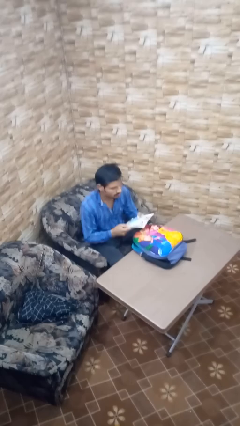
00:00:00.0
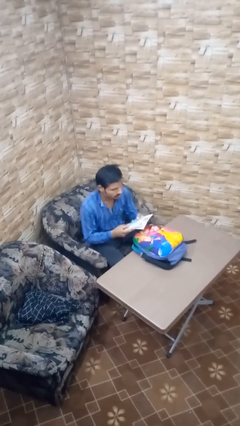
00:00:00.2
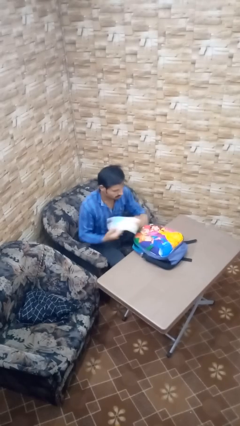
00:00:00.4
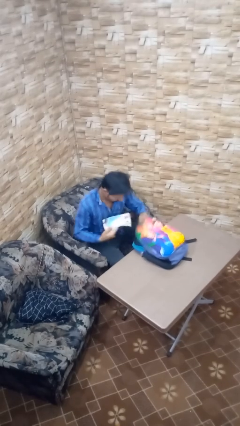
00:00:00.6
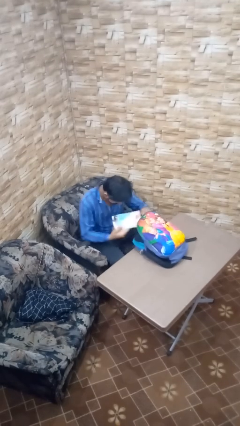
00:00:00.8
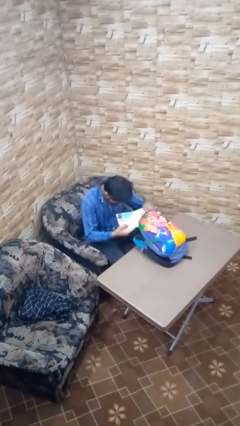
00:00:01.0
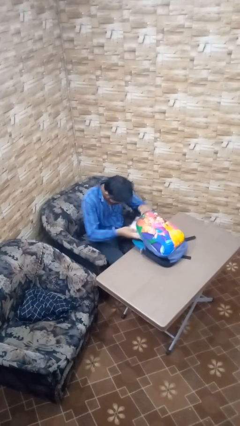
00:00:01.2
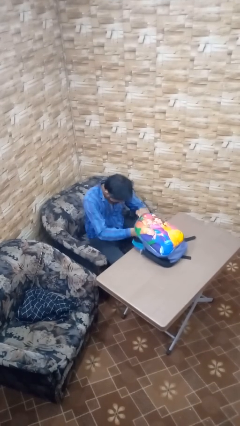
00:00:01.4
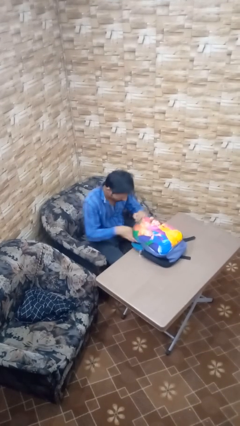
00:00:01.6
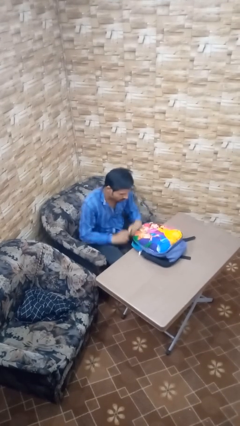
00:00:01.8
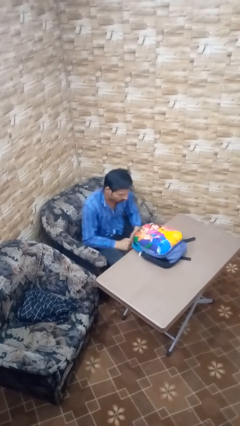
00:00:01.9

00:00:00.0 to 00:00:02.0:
person puts object into backpack

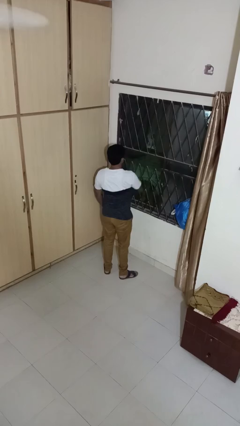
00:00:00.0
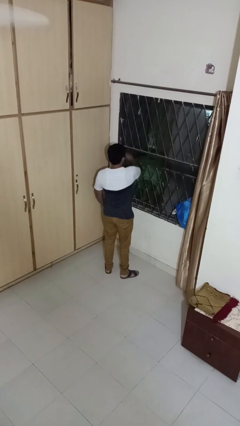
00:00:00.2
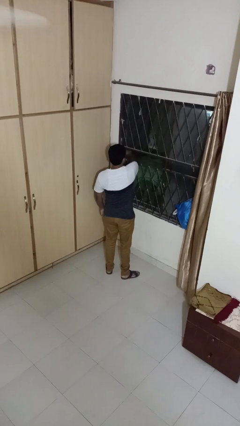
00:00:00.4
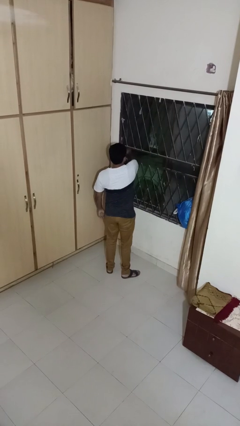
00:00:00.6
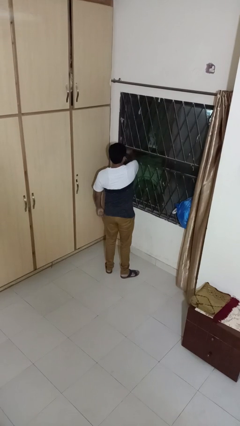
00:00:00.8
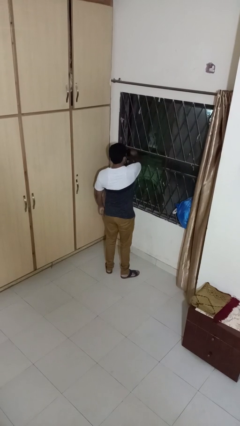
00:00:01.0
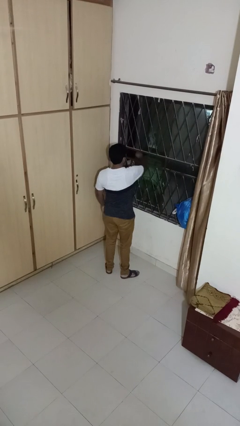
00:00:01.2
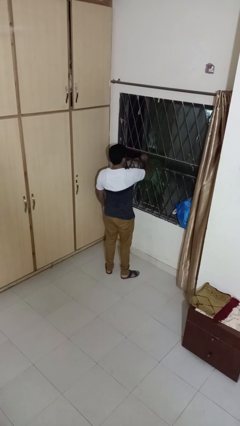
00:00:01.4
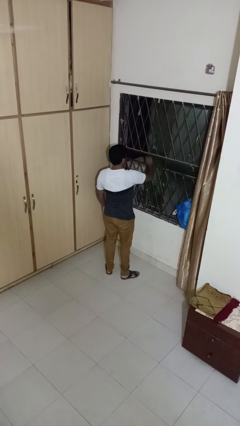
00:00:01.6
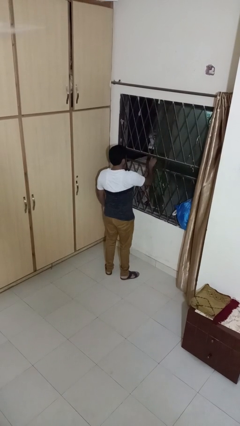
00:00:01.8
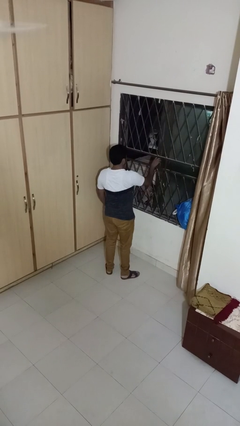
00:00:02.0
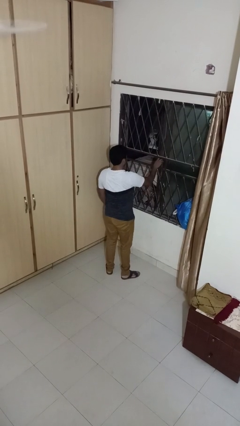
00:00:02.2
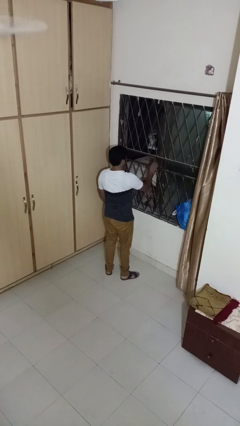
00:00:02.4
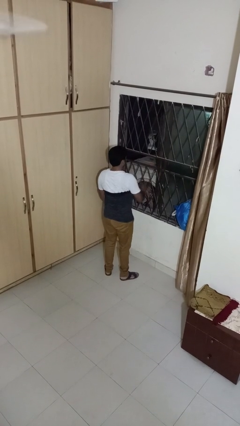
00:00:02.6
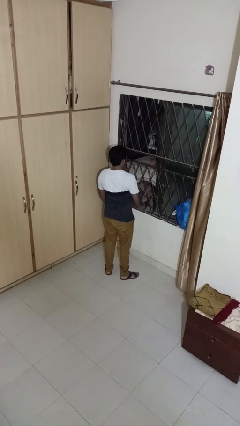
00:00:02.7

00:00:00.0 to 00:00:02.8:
person opens home window

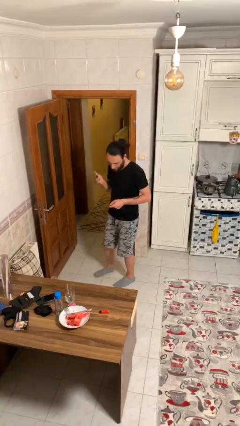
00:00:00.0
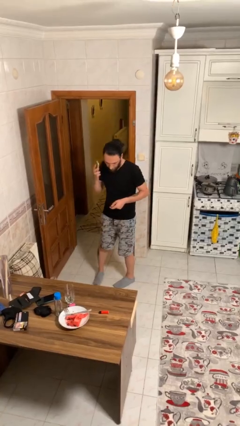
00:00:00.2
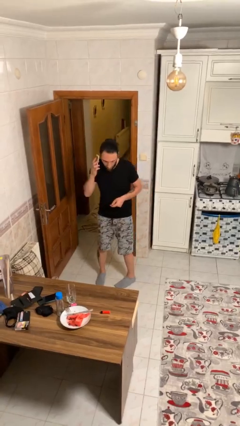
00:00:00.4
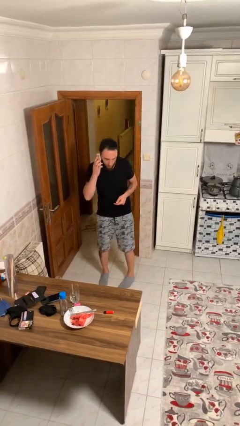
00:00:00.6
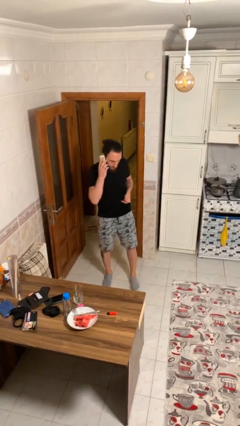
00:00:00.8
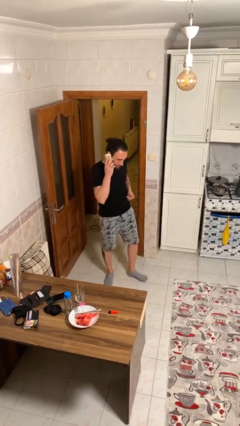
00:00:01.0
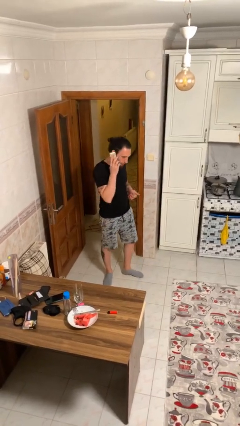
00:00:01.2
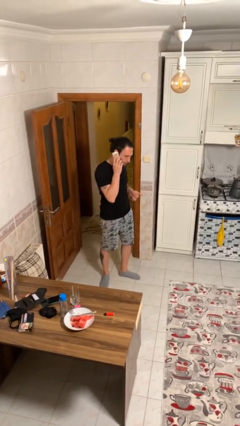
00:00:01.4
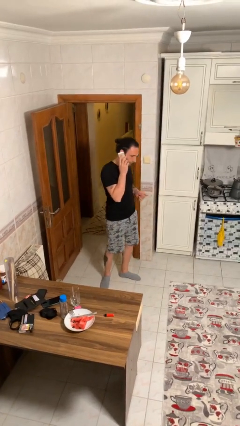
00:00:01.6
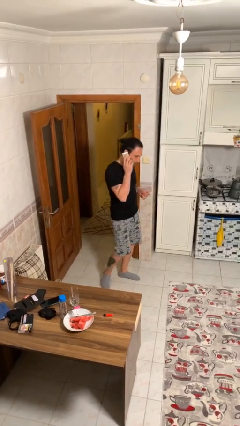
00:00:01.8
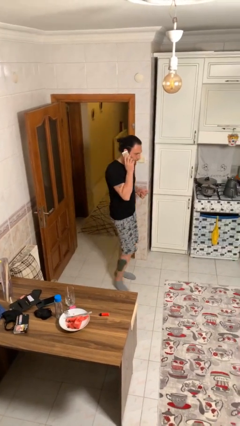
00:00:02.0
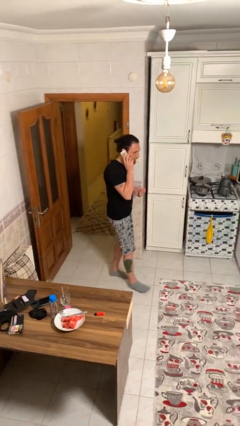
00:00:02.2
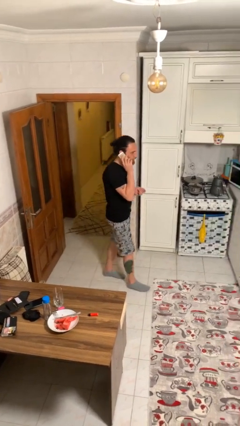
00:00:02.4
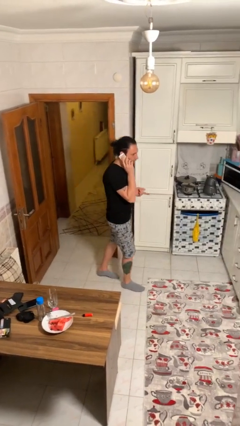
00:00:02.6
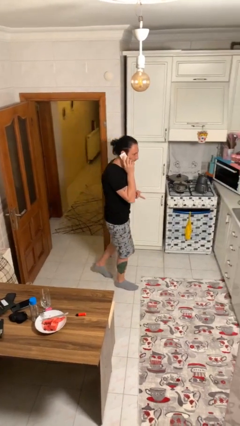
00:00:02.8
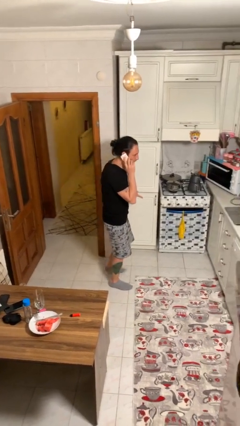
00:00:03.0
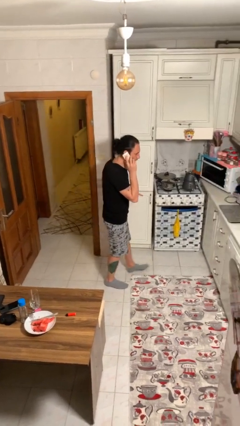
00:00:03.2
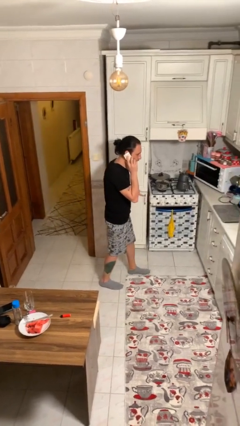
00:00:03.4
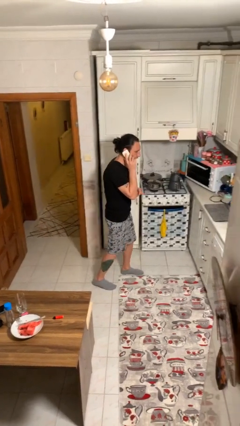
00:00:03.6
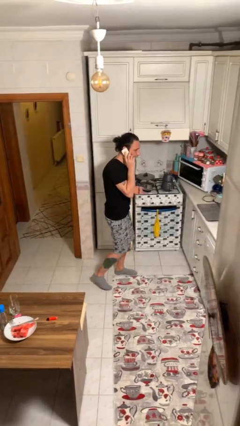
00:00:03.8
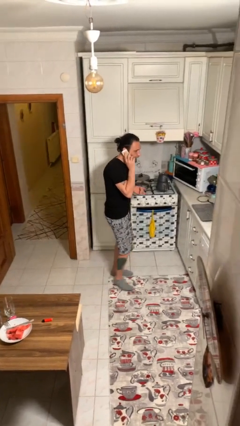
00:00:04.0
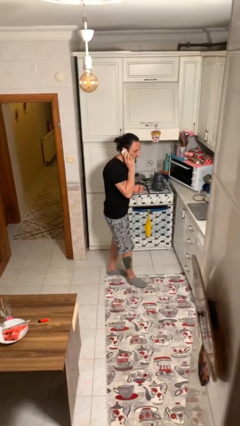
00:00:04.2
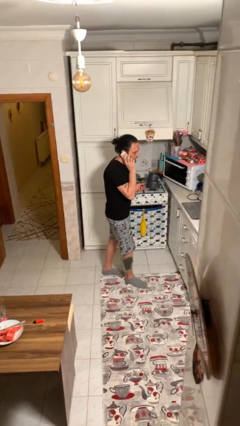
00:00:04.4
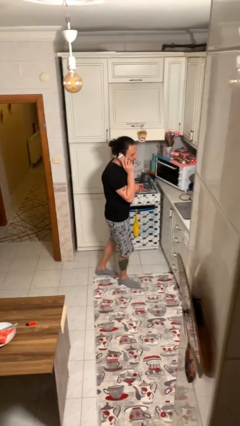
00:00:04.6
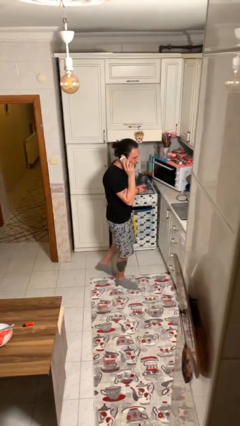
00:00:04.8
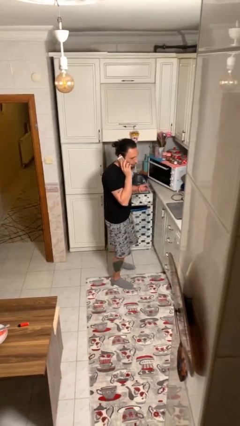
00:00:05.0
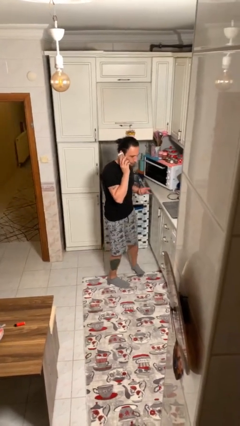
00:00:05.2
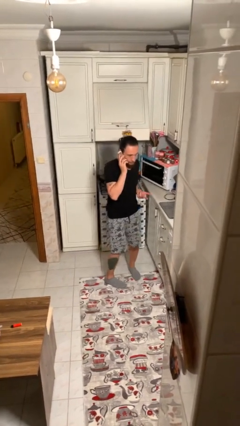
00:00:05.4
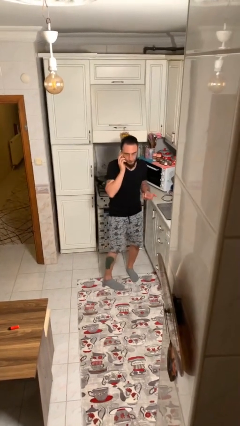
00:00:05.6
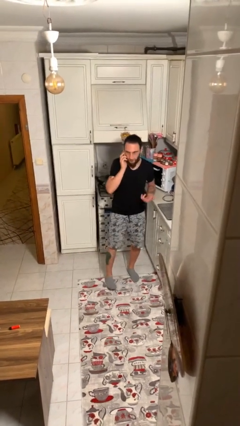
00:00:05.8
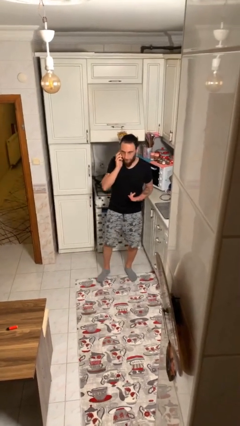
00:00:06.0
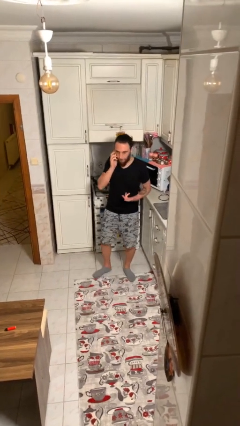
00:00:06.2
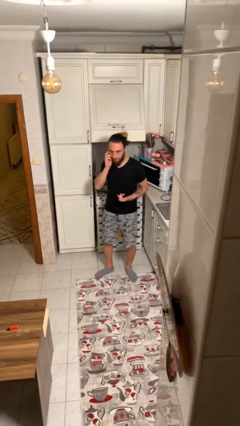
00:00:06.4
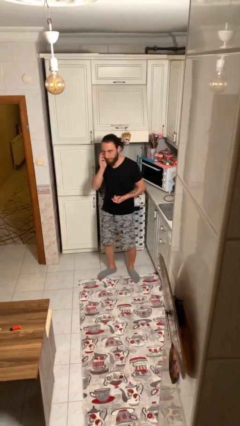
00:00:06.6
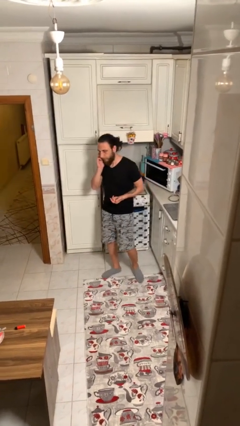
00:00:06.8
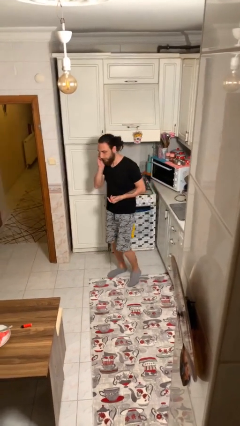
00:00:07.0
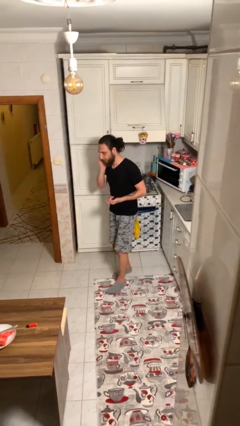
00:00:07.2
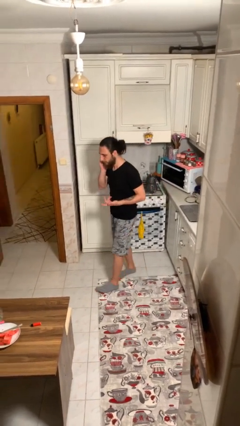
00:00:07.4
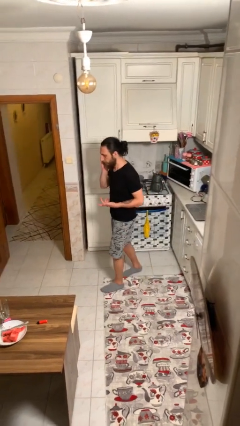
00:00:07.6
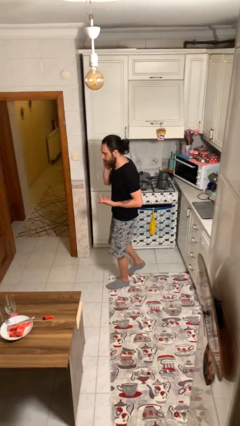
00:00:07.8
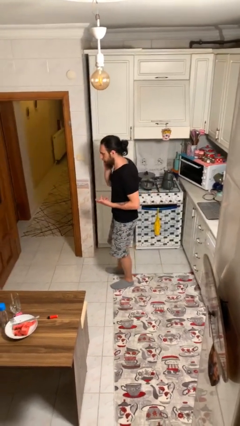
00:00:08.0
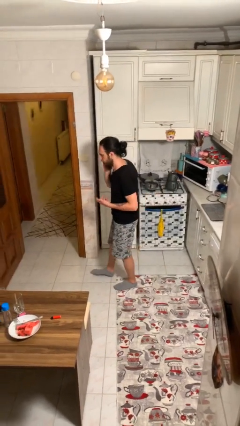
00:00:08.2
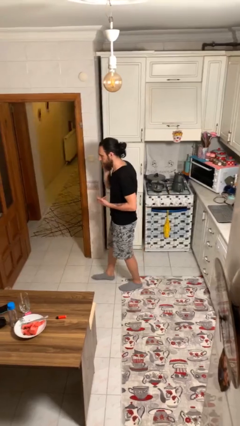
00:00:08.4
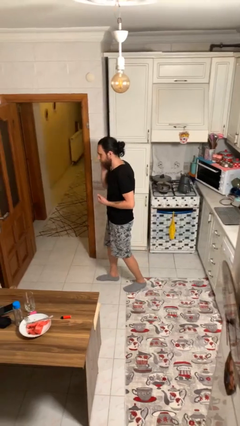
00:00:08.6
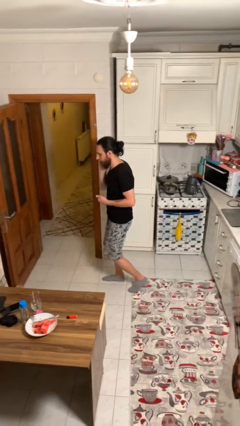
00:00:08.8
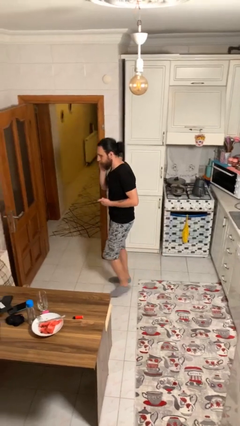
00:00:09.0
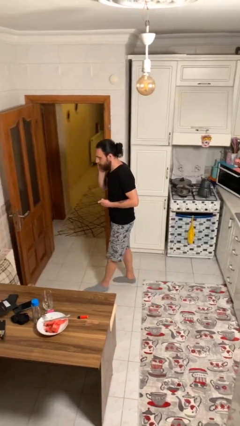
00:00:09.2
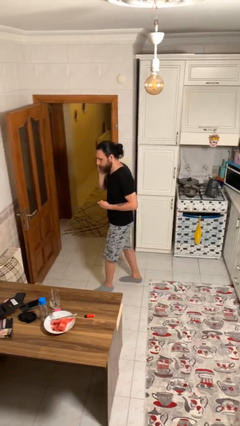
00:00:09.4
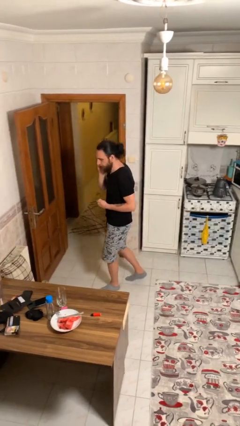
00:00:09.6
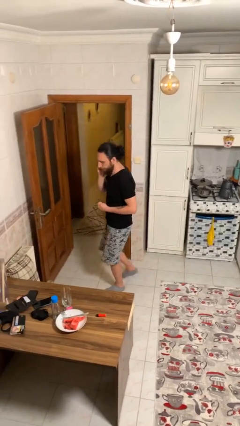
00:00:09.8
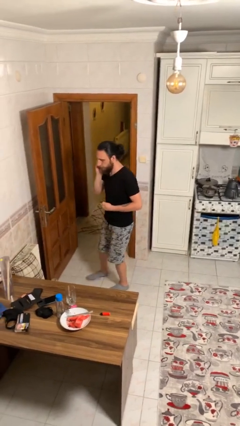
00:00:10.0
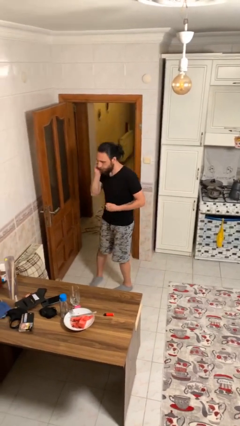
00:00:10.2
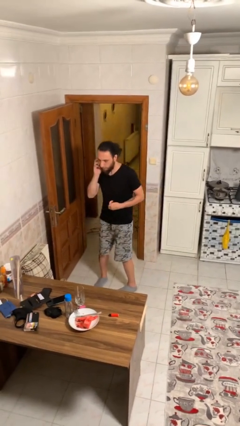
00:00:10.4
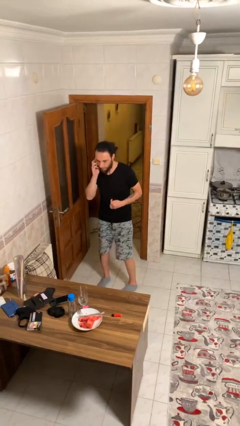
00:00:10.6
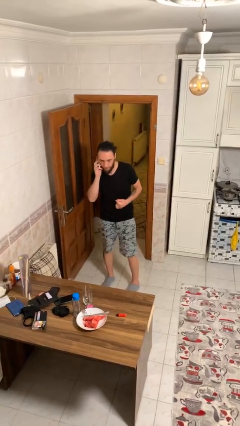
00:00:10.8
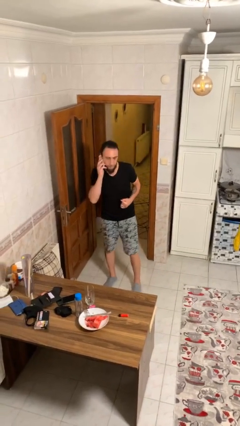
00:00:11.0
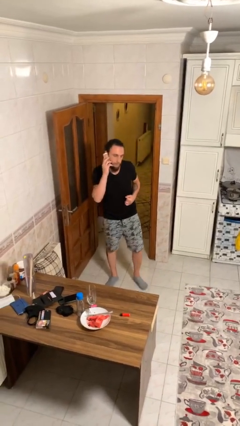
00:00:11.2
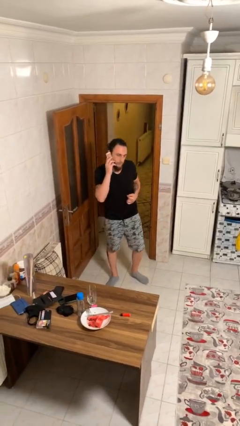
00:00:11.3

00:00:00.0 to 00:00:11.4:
person talks on phone

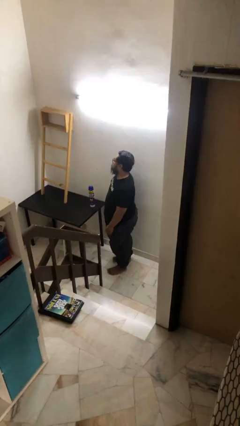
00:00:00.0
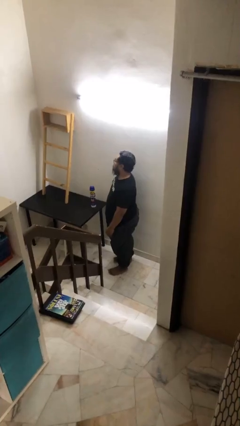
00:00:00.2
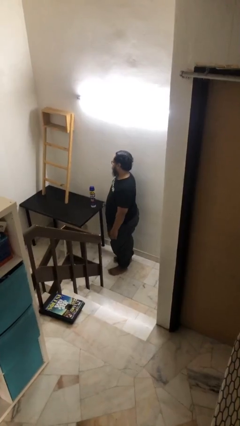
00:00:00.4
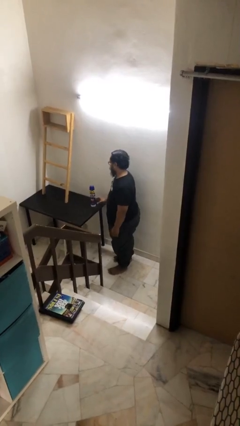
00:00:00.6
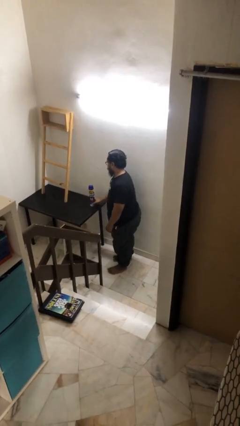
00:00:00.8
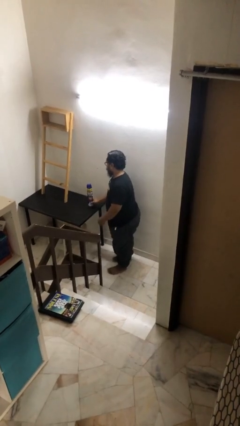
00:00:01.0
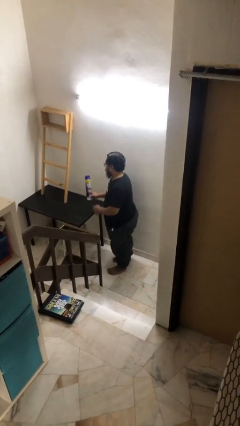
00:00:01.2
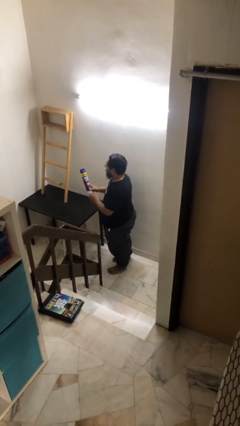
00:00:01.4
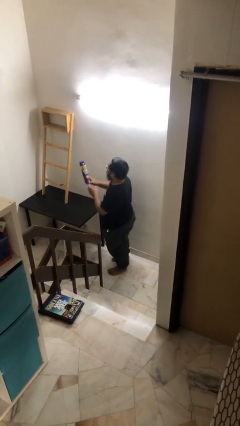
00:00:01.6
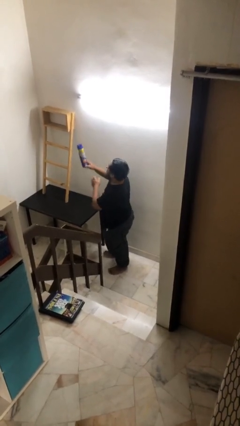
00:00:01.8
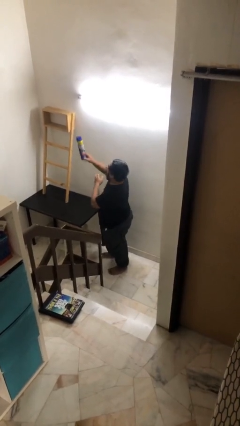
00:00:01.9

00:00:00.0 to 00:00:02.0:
person picks up object from table
